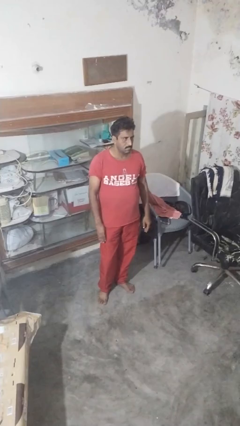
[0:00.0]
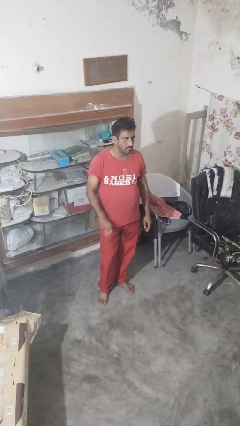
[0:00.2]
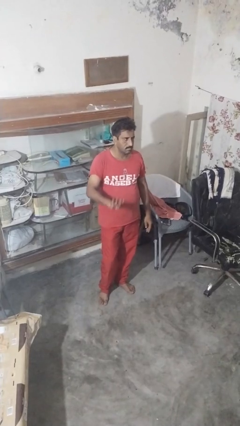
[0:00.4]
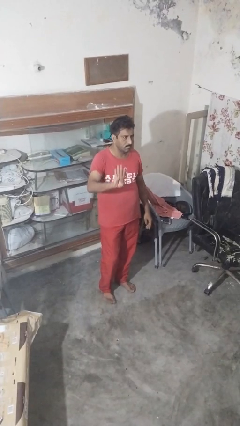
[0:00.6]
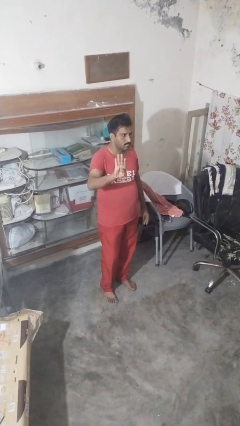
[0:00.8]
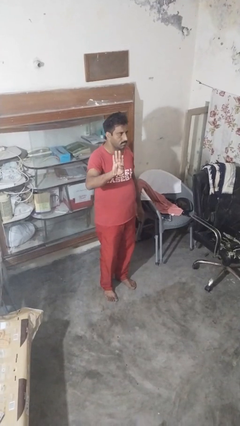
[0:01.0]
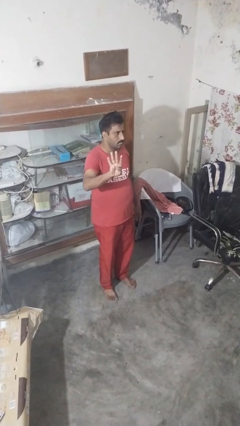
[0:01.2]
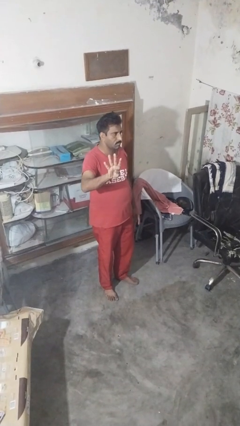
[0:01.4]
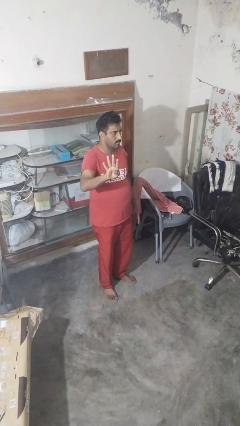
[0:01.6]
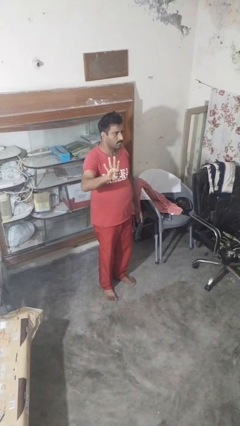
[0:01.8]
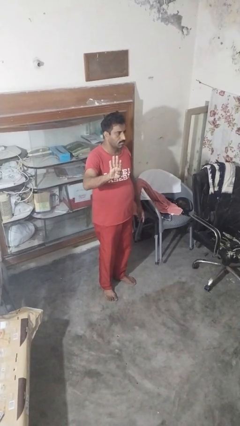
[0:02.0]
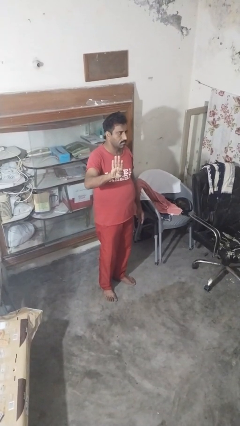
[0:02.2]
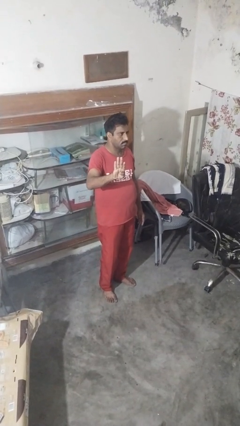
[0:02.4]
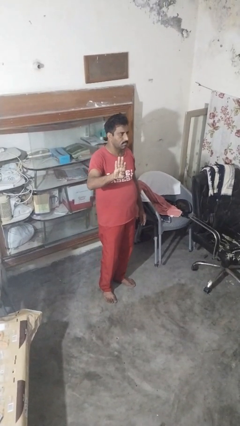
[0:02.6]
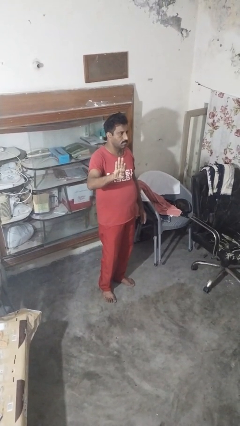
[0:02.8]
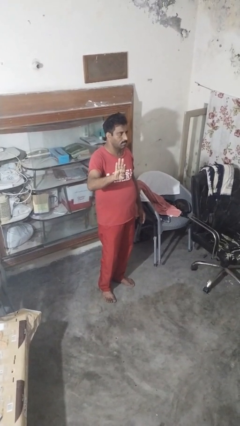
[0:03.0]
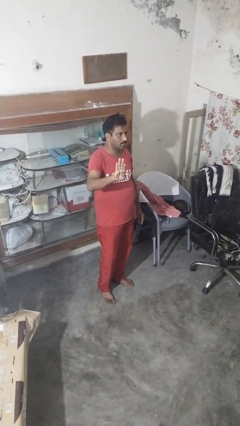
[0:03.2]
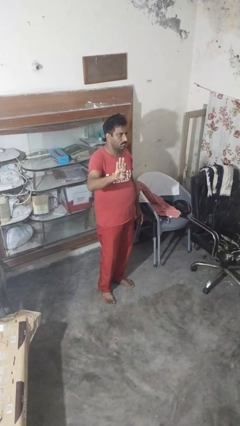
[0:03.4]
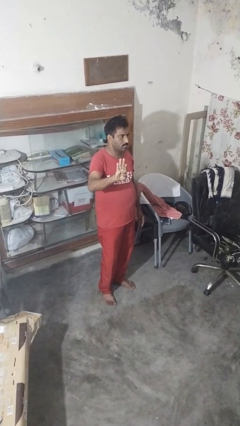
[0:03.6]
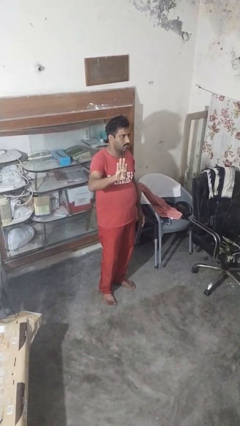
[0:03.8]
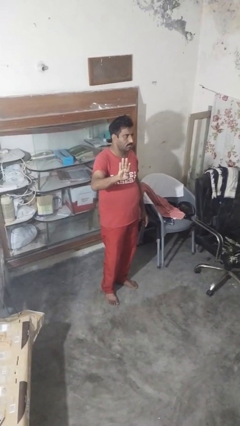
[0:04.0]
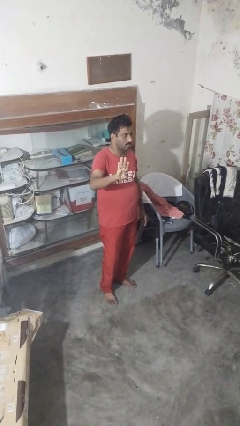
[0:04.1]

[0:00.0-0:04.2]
person gestures number four

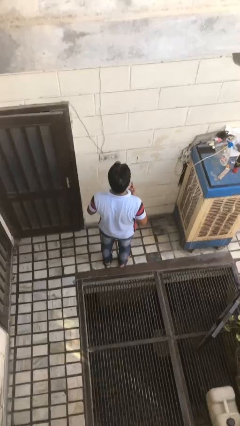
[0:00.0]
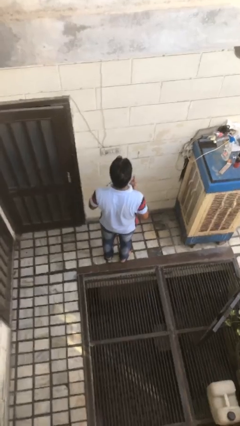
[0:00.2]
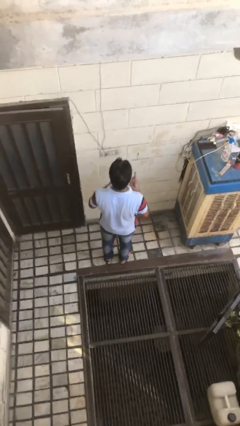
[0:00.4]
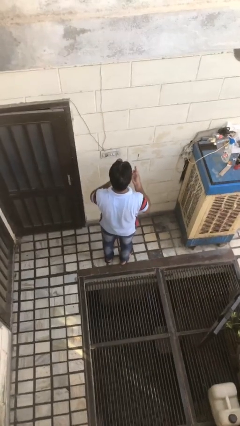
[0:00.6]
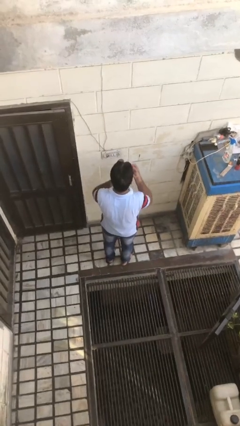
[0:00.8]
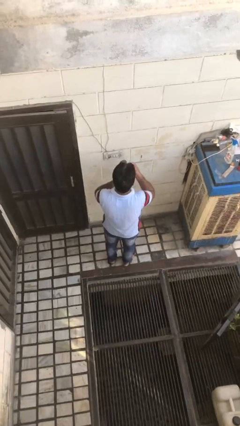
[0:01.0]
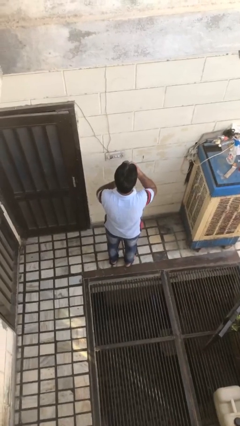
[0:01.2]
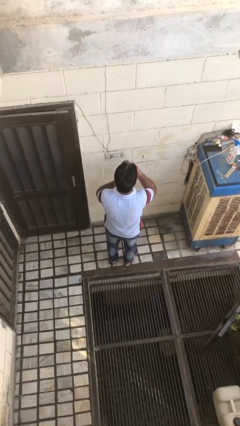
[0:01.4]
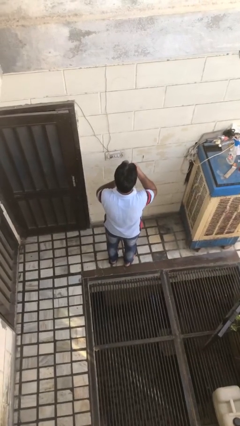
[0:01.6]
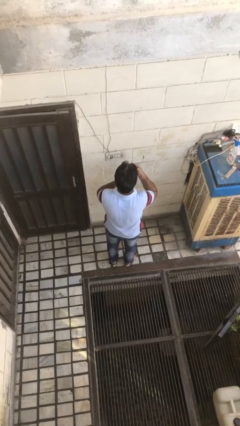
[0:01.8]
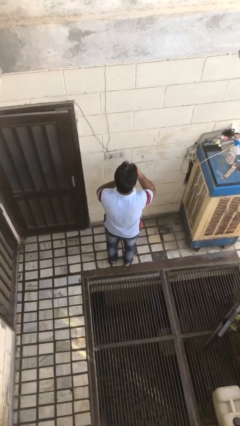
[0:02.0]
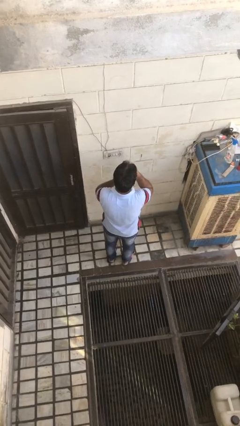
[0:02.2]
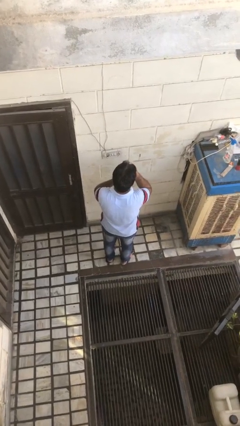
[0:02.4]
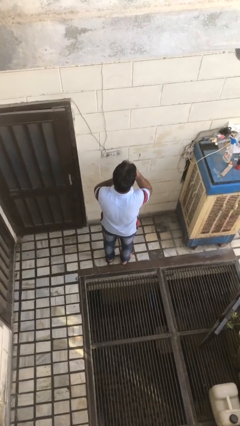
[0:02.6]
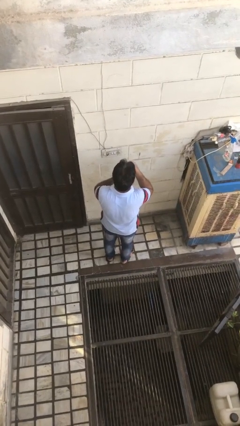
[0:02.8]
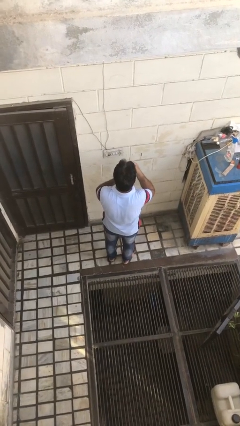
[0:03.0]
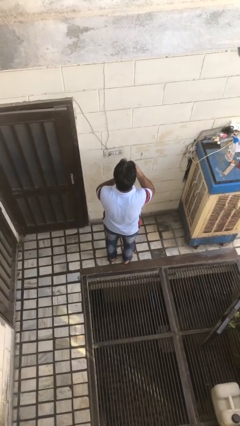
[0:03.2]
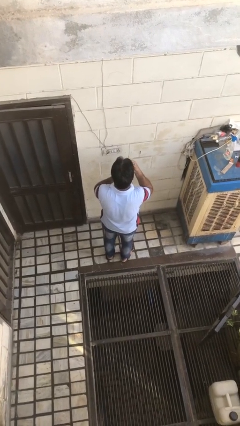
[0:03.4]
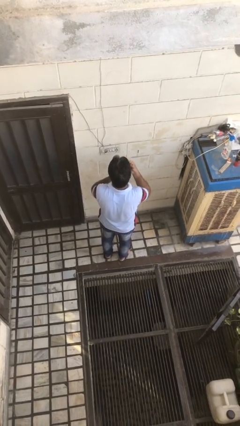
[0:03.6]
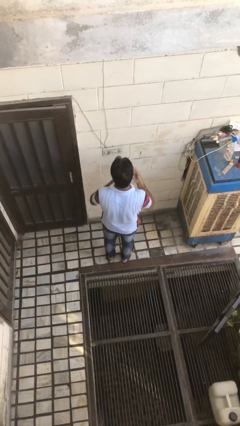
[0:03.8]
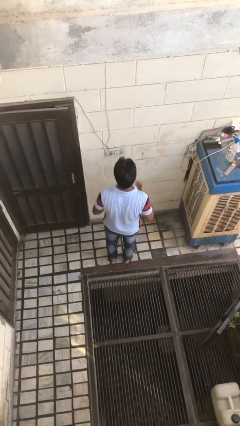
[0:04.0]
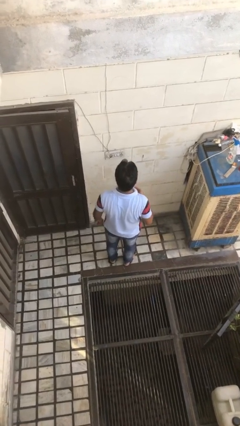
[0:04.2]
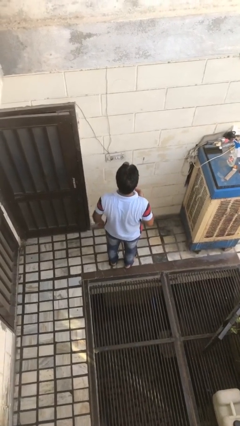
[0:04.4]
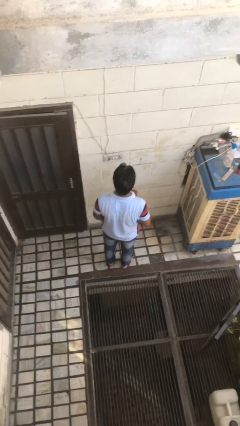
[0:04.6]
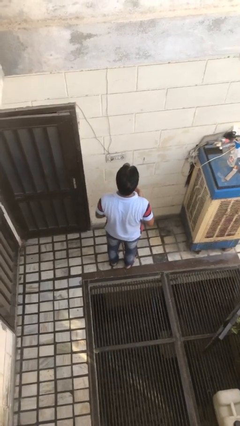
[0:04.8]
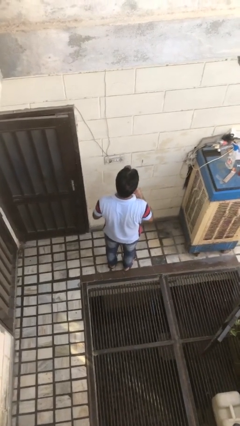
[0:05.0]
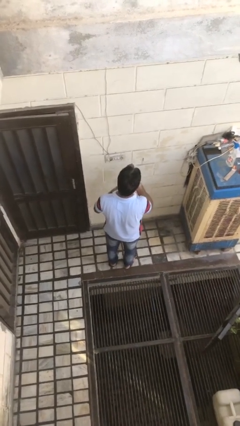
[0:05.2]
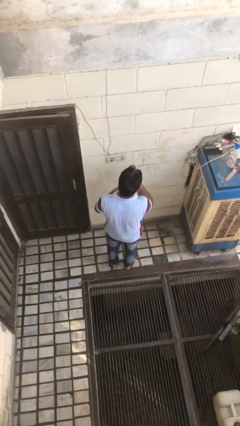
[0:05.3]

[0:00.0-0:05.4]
person applies lip makeup

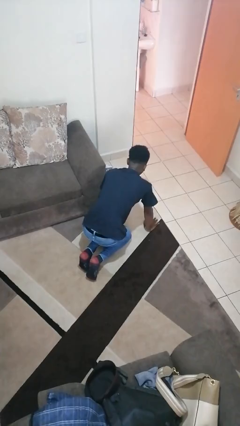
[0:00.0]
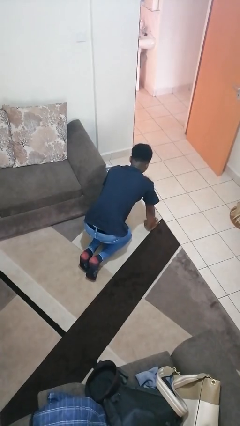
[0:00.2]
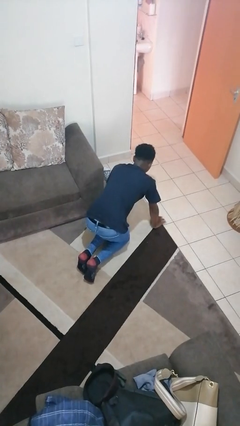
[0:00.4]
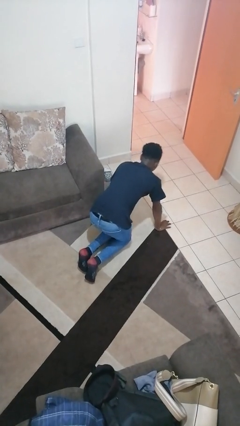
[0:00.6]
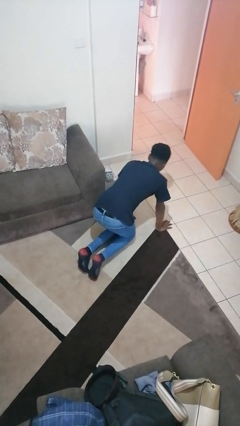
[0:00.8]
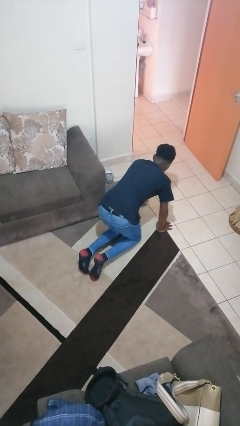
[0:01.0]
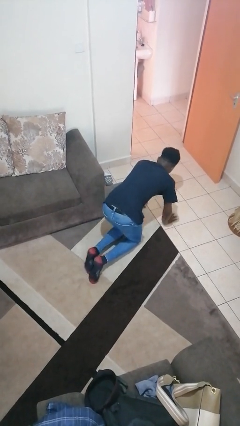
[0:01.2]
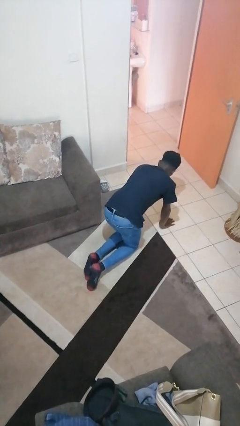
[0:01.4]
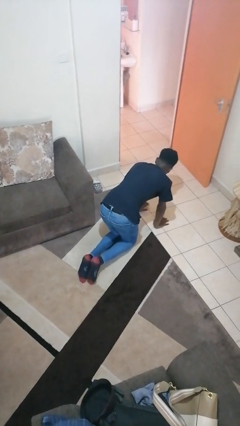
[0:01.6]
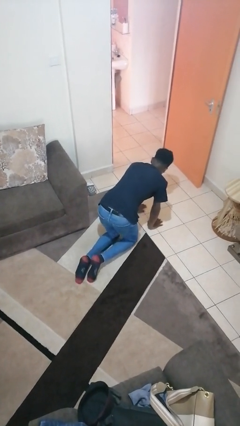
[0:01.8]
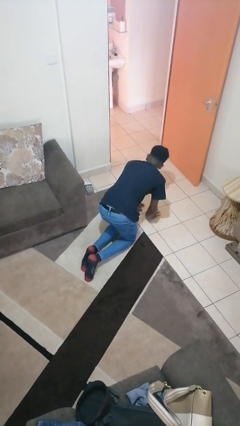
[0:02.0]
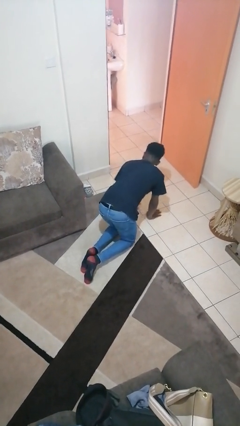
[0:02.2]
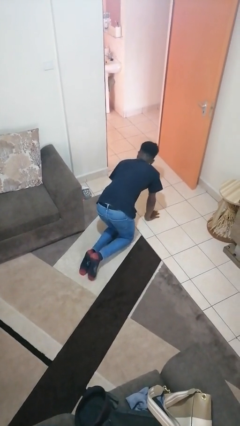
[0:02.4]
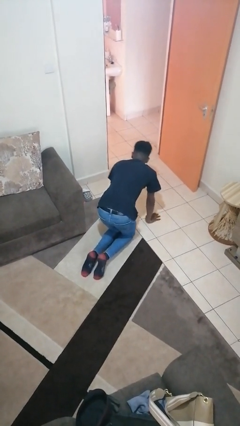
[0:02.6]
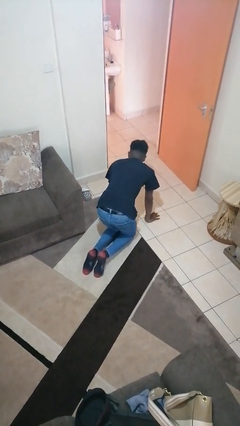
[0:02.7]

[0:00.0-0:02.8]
person crawls

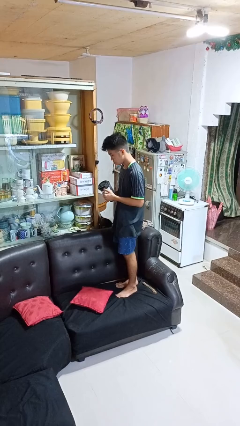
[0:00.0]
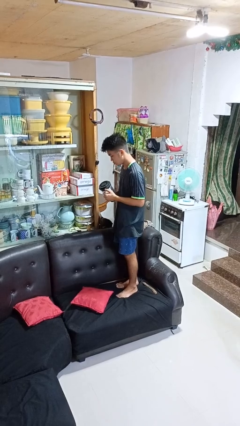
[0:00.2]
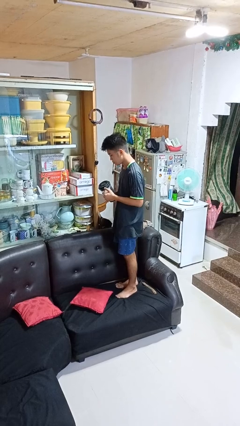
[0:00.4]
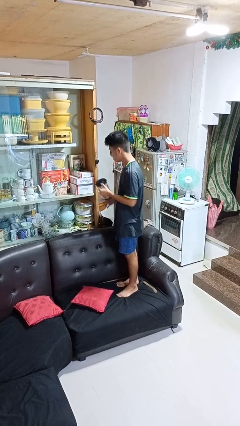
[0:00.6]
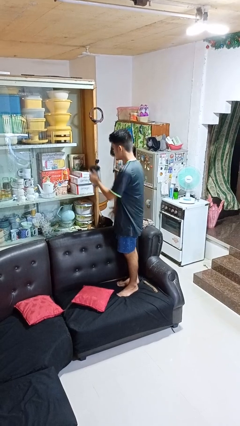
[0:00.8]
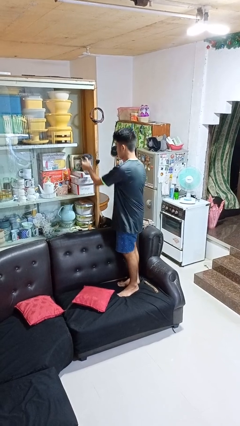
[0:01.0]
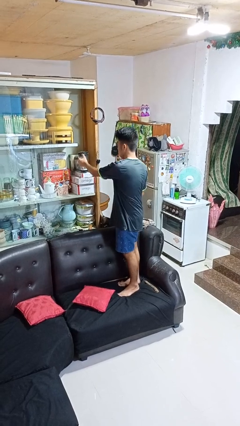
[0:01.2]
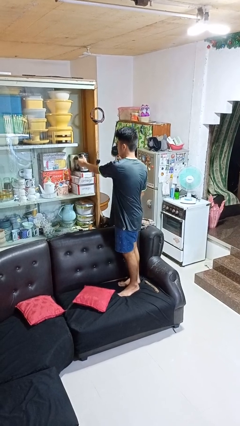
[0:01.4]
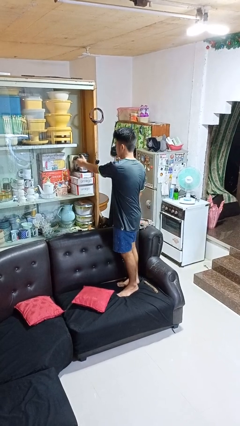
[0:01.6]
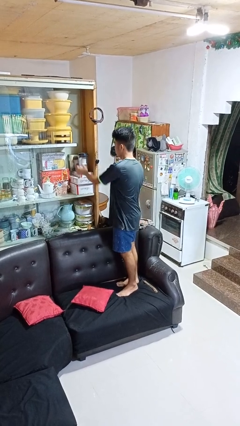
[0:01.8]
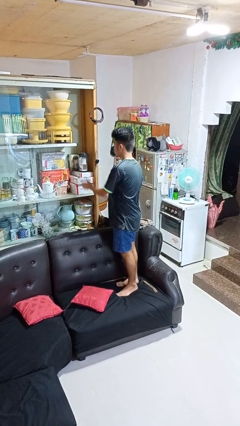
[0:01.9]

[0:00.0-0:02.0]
person puts down object into cabinet

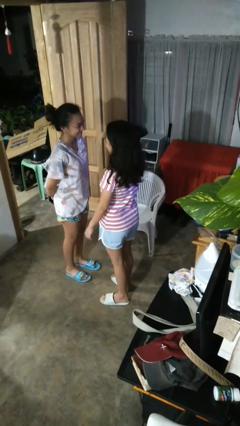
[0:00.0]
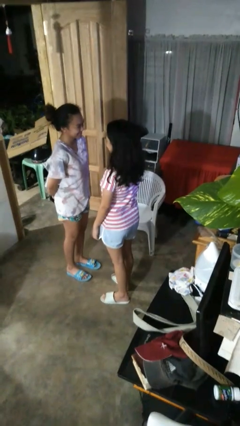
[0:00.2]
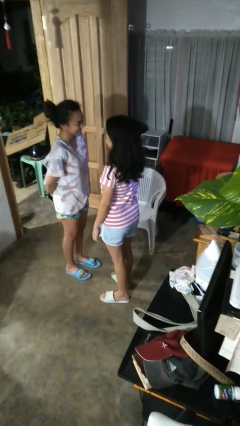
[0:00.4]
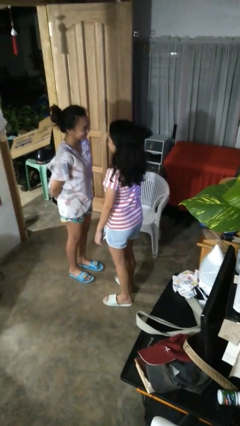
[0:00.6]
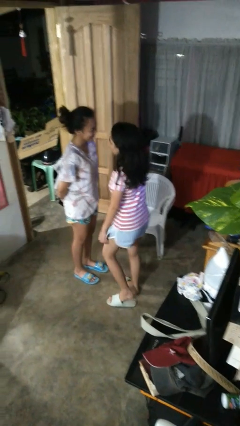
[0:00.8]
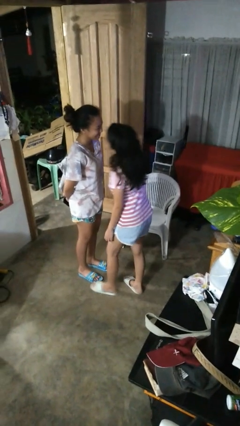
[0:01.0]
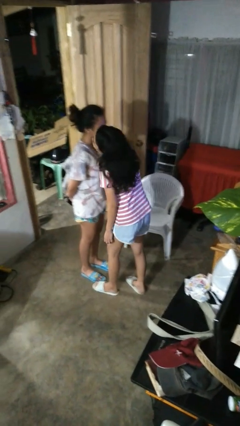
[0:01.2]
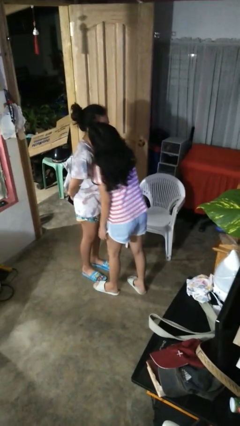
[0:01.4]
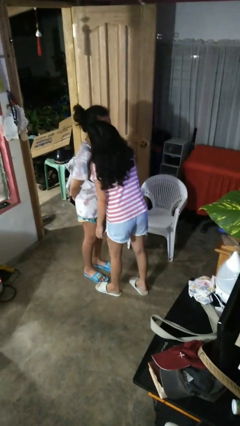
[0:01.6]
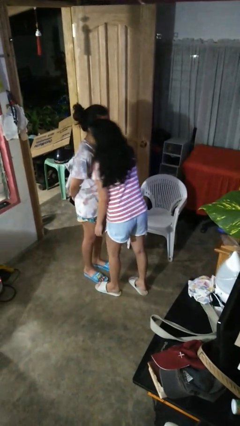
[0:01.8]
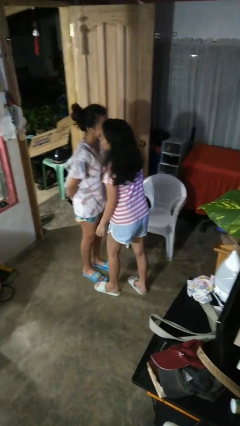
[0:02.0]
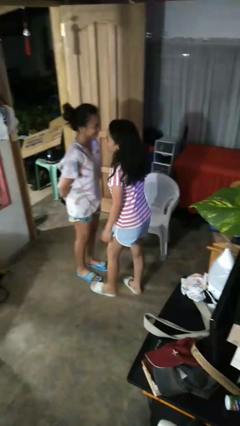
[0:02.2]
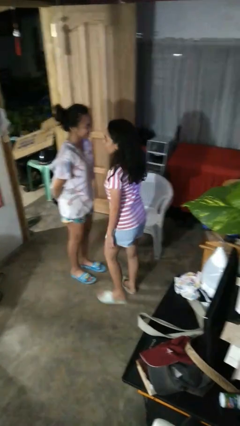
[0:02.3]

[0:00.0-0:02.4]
person kisses cheek of person

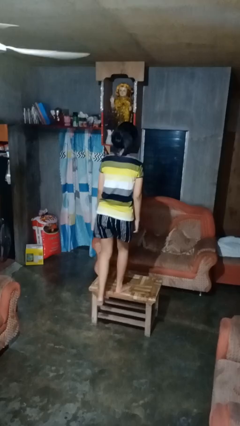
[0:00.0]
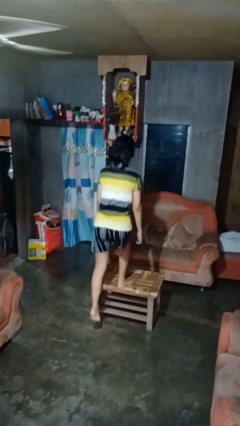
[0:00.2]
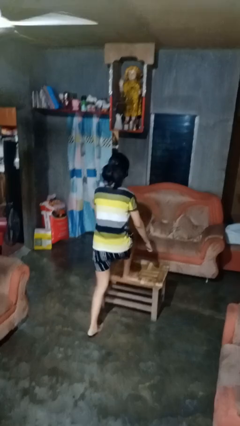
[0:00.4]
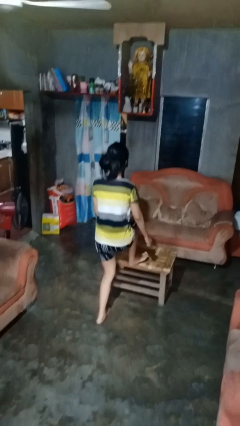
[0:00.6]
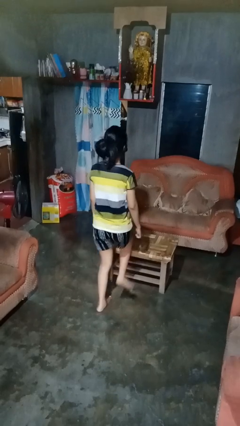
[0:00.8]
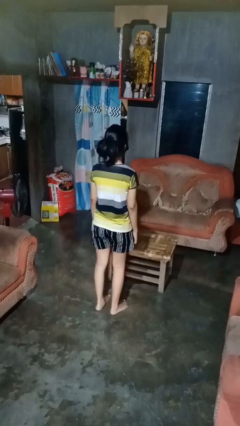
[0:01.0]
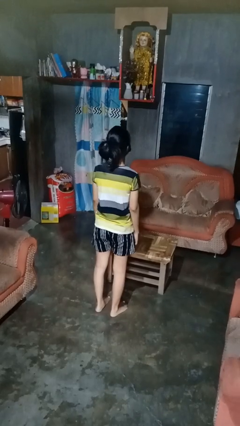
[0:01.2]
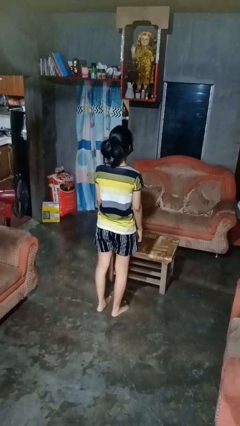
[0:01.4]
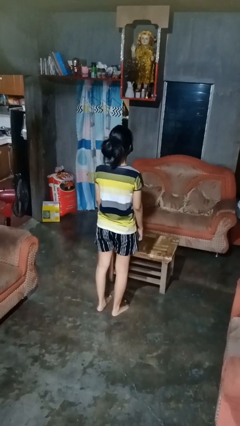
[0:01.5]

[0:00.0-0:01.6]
person climbs off table
